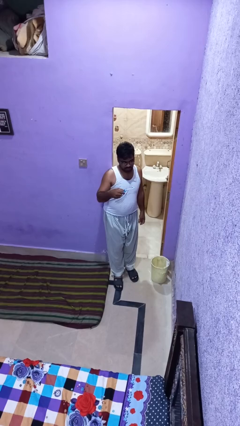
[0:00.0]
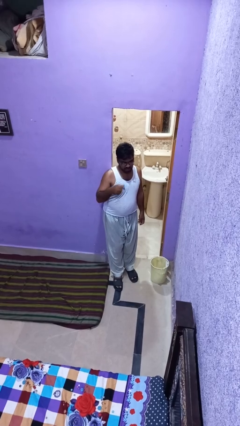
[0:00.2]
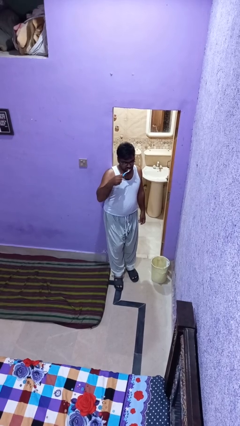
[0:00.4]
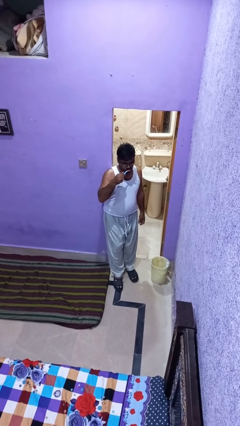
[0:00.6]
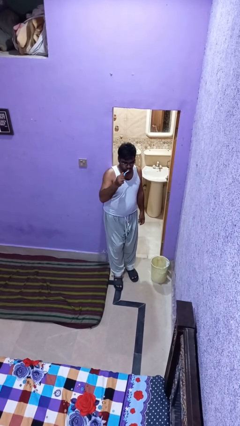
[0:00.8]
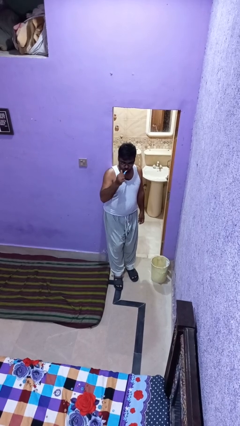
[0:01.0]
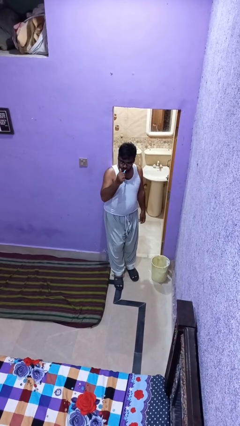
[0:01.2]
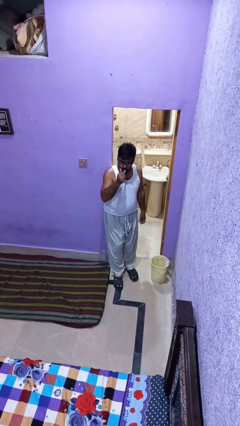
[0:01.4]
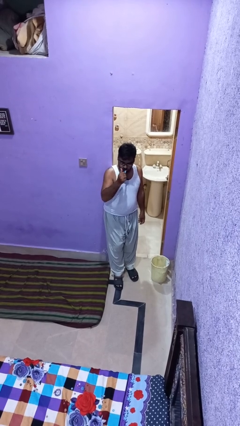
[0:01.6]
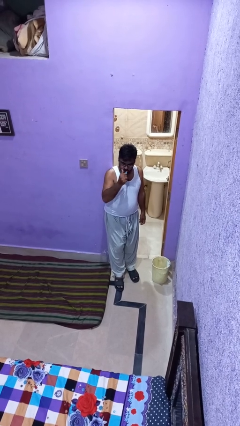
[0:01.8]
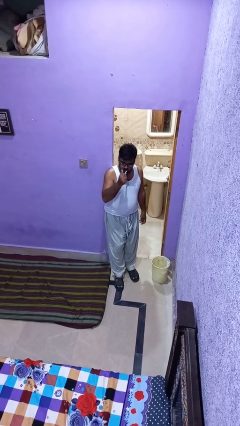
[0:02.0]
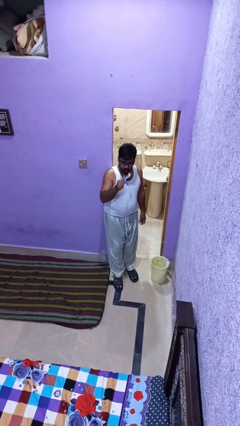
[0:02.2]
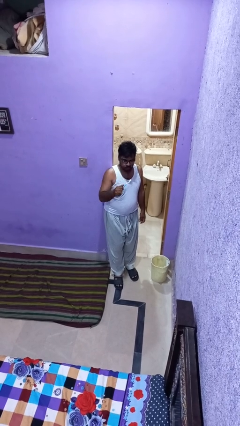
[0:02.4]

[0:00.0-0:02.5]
person brushes teeth

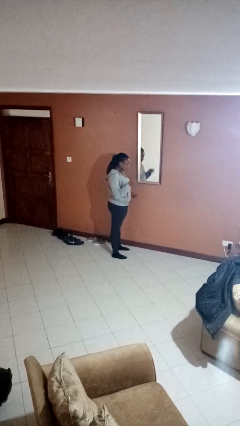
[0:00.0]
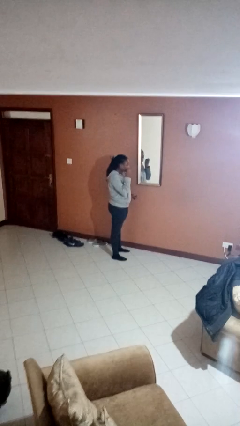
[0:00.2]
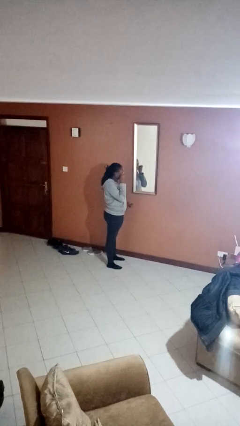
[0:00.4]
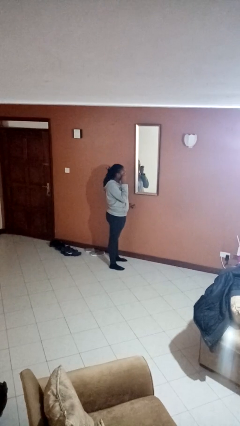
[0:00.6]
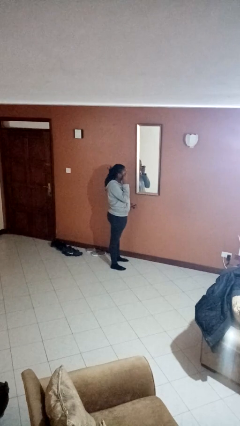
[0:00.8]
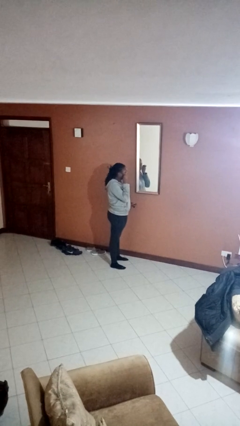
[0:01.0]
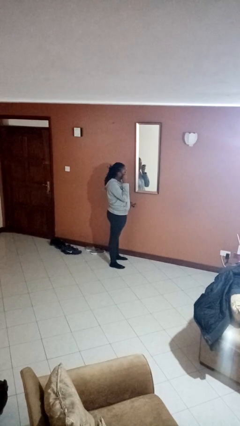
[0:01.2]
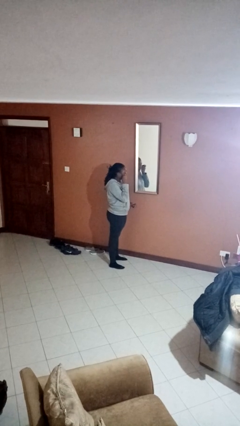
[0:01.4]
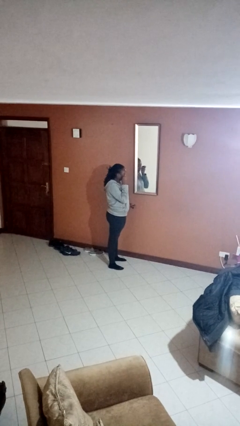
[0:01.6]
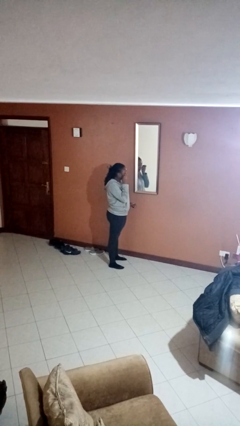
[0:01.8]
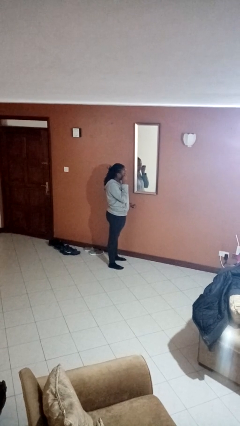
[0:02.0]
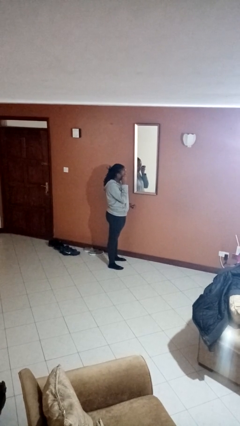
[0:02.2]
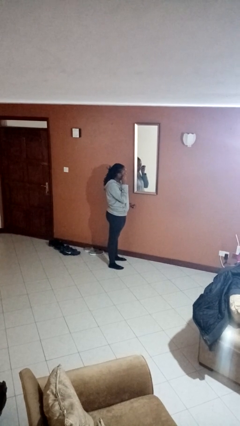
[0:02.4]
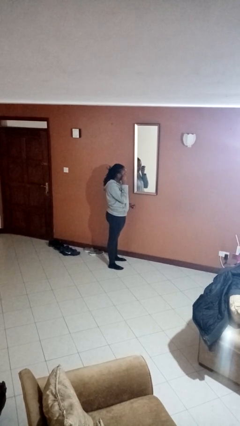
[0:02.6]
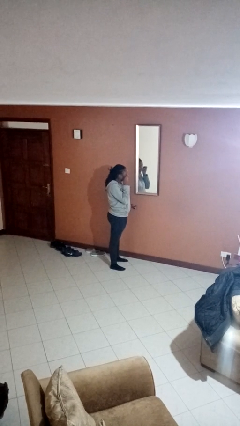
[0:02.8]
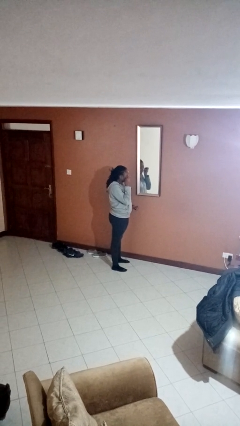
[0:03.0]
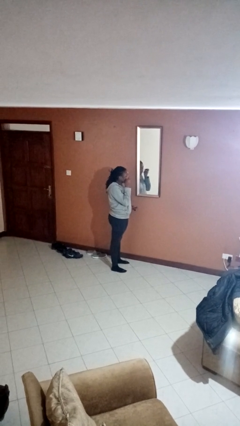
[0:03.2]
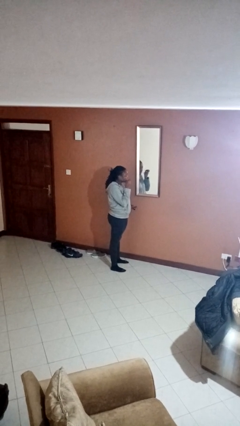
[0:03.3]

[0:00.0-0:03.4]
person applies eye makeup

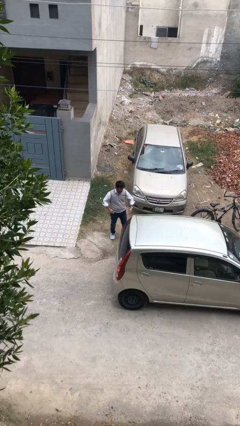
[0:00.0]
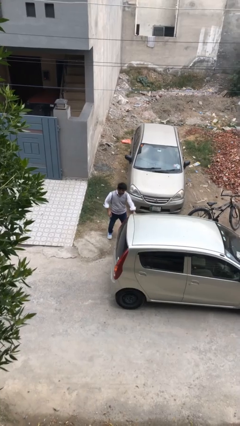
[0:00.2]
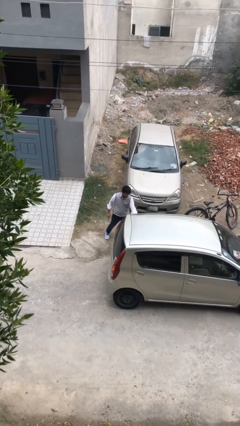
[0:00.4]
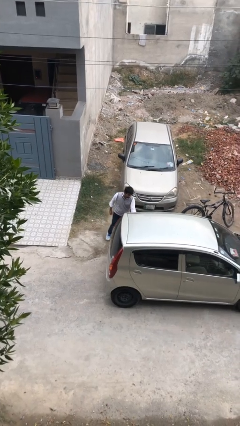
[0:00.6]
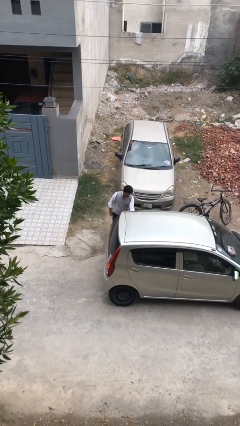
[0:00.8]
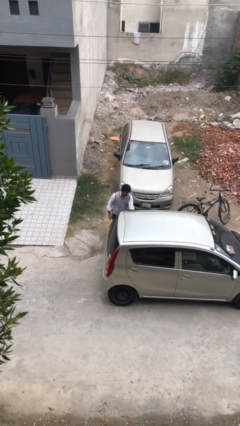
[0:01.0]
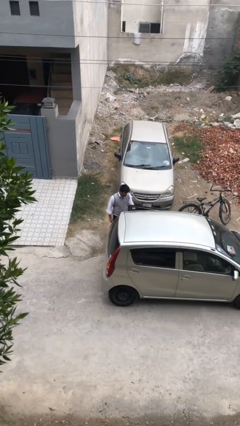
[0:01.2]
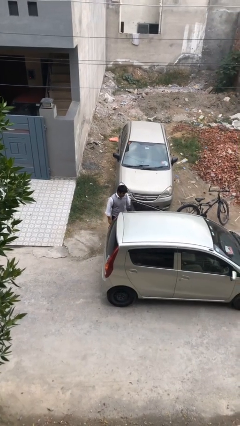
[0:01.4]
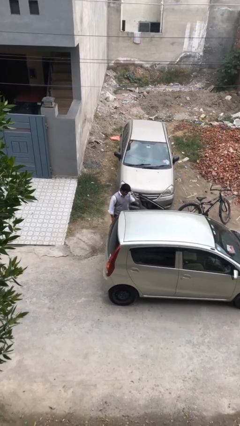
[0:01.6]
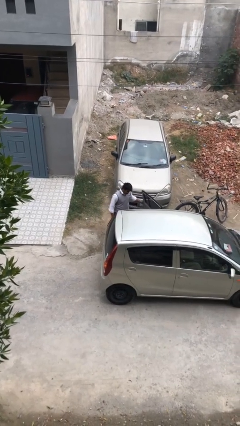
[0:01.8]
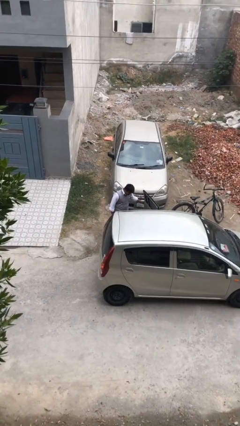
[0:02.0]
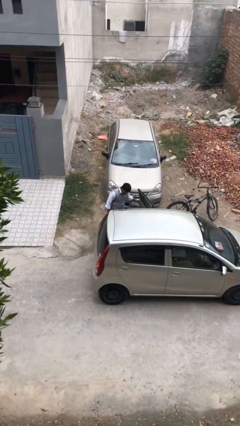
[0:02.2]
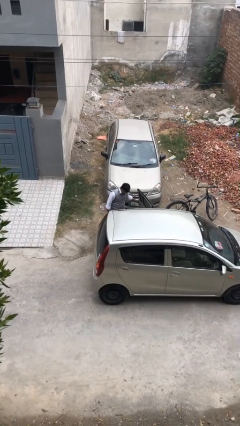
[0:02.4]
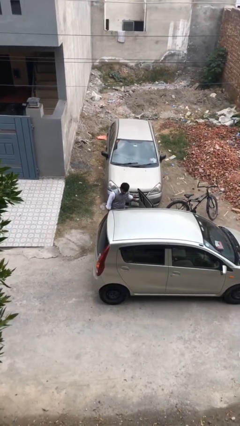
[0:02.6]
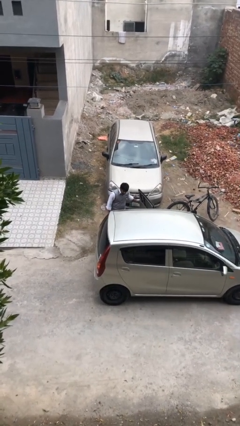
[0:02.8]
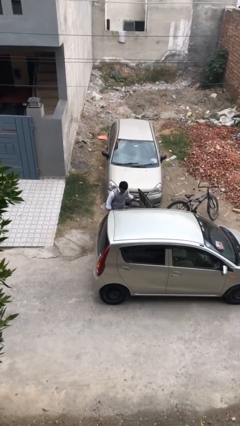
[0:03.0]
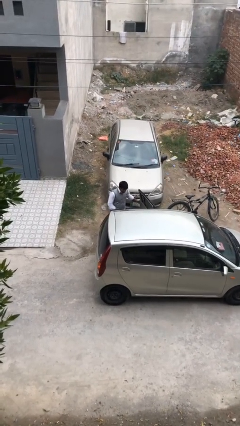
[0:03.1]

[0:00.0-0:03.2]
person opens car door

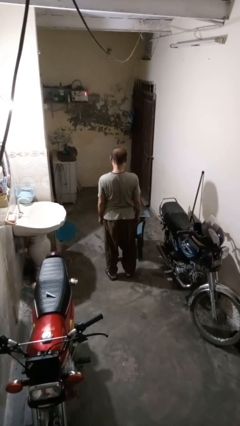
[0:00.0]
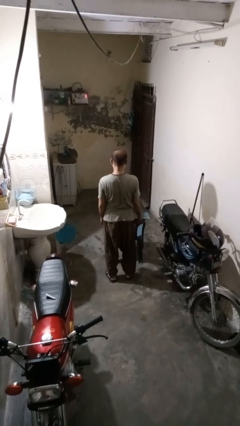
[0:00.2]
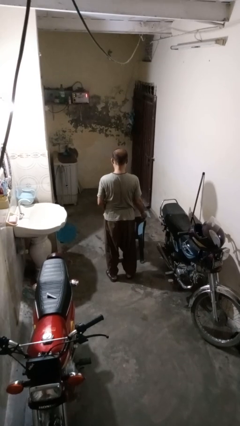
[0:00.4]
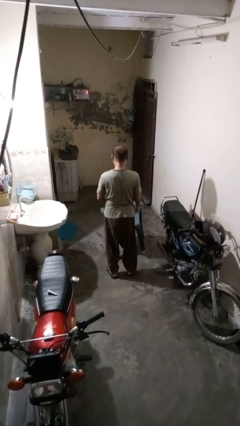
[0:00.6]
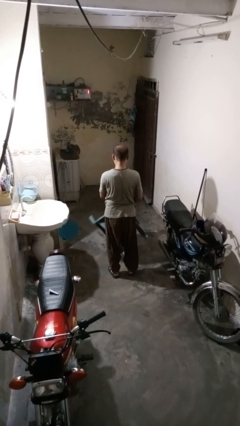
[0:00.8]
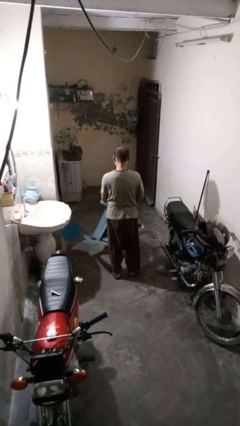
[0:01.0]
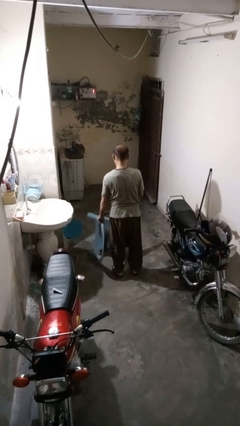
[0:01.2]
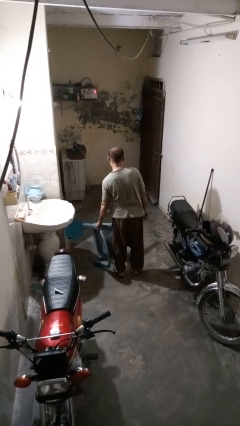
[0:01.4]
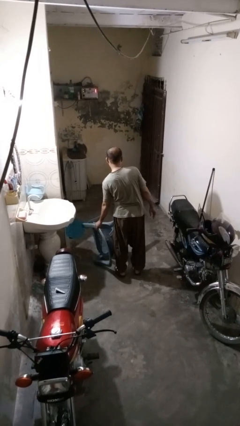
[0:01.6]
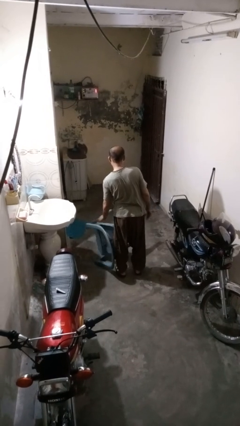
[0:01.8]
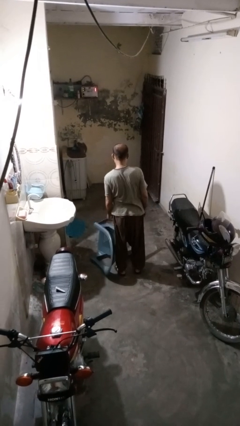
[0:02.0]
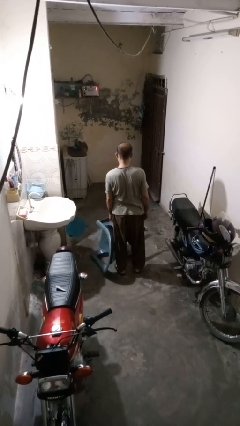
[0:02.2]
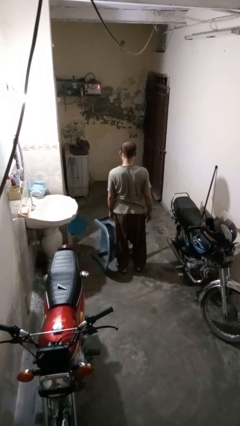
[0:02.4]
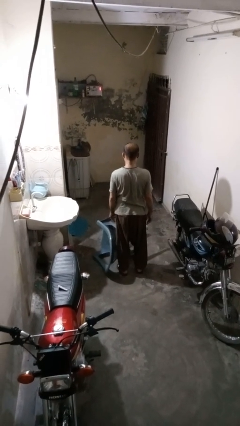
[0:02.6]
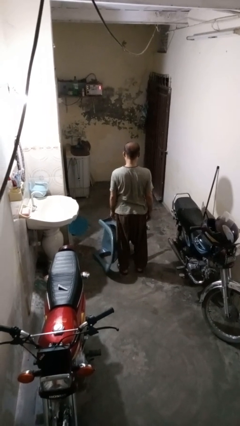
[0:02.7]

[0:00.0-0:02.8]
person knocks over furniture

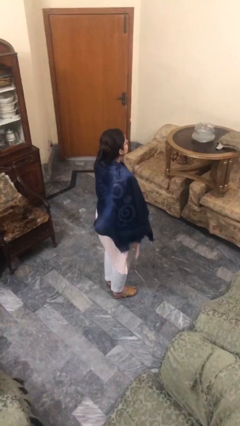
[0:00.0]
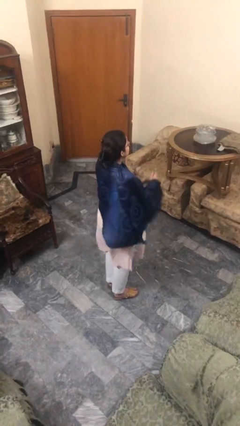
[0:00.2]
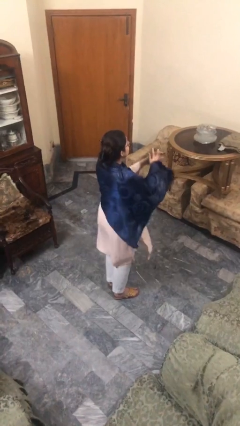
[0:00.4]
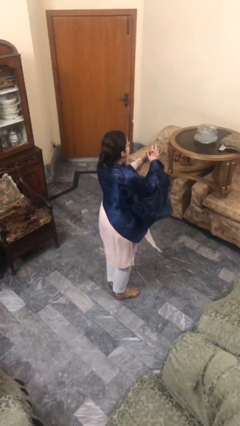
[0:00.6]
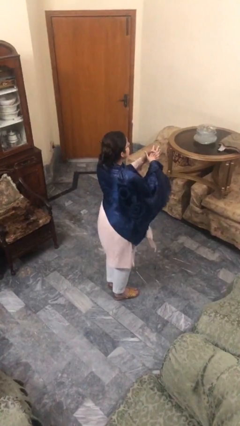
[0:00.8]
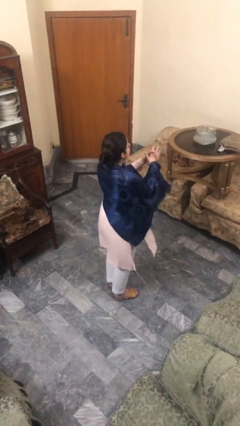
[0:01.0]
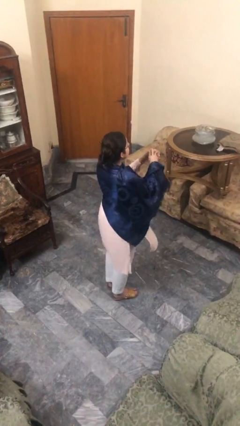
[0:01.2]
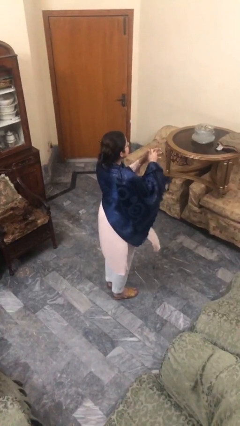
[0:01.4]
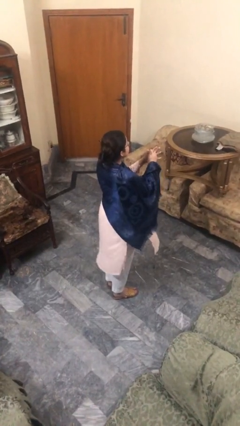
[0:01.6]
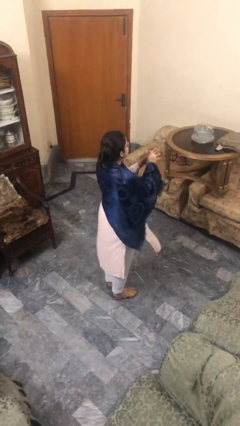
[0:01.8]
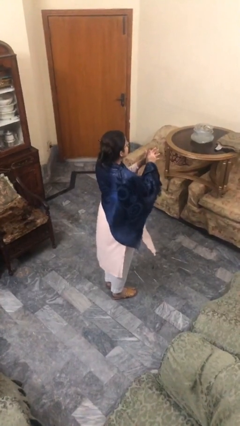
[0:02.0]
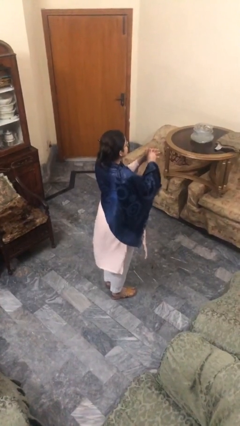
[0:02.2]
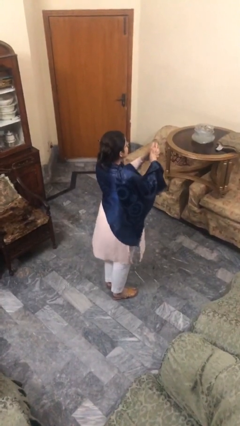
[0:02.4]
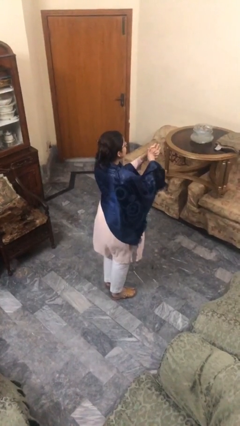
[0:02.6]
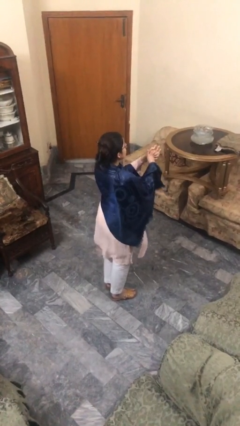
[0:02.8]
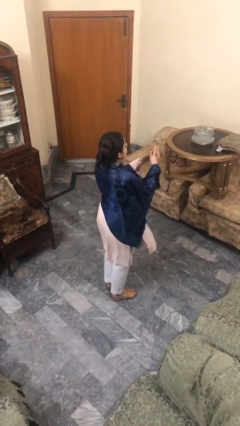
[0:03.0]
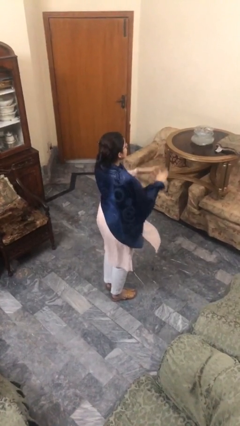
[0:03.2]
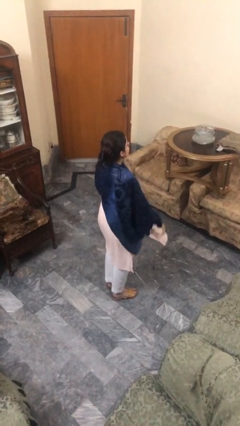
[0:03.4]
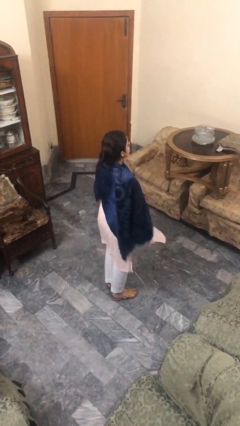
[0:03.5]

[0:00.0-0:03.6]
person cracks knuckles

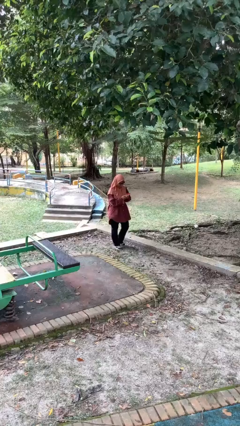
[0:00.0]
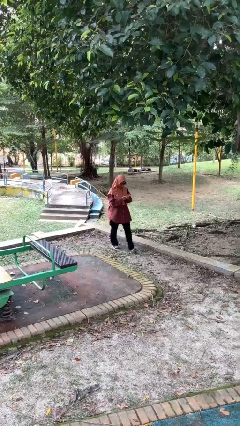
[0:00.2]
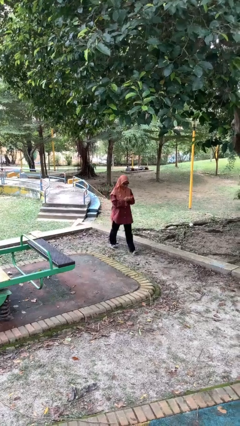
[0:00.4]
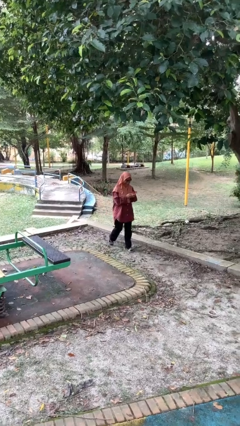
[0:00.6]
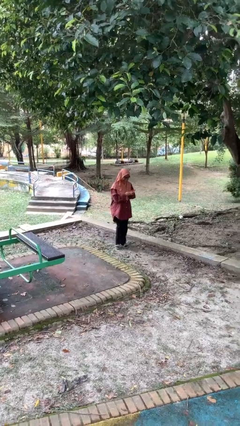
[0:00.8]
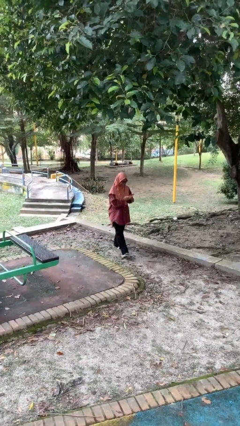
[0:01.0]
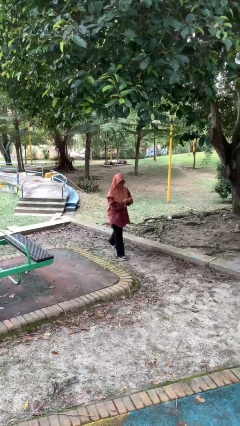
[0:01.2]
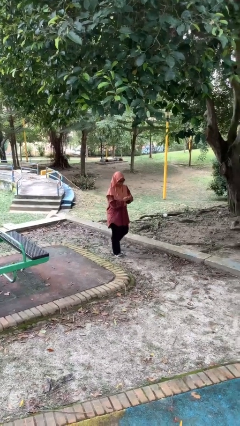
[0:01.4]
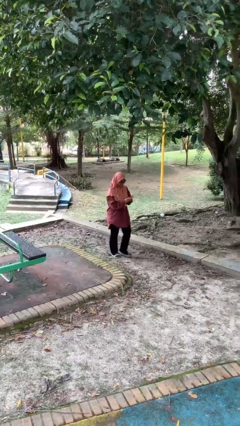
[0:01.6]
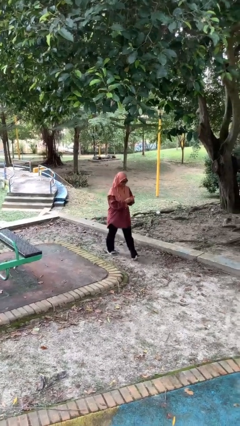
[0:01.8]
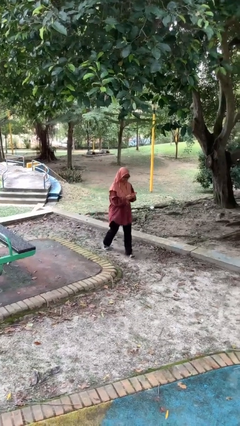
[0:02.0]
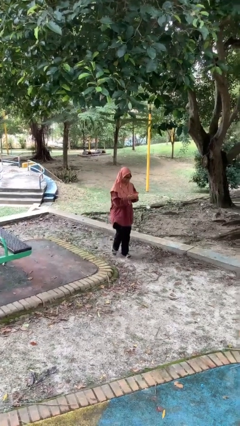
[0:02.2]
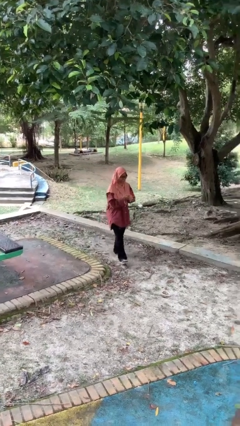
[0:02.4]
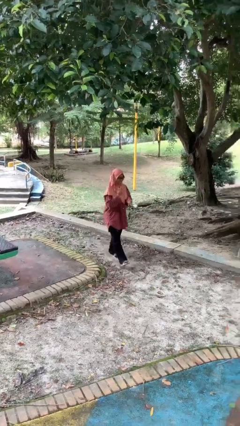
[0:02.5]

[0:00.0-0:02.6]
person texts on phone
